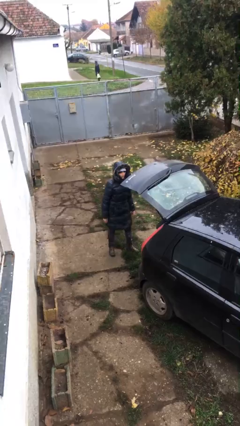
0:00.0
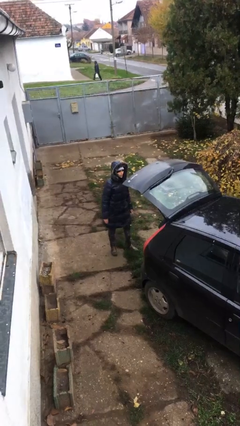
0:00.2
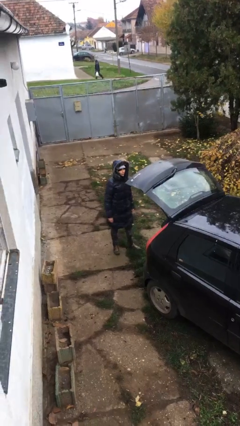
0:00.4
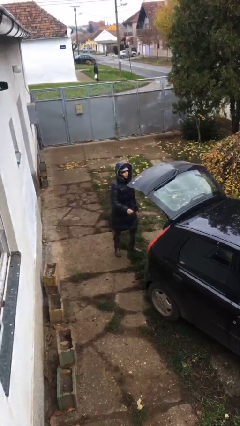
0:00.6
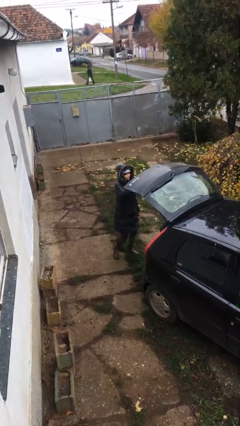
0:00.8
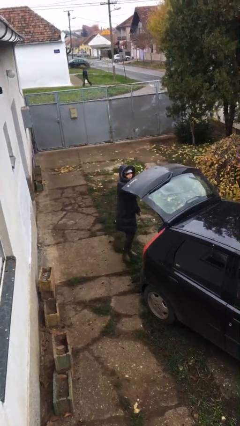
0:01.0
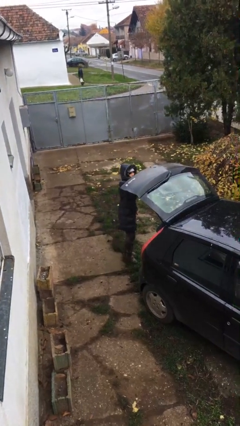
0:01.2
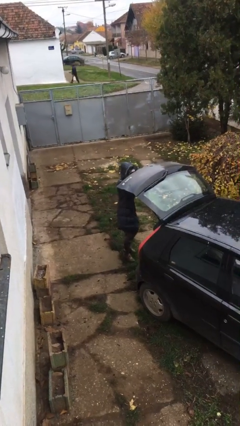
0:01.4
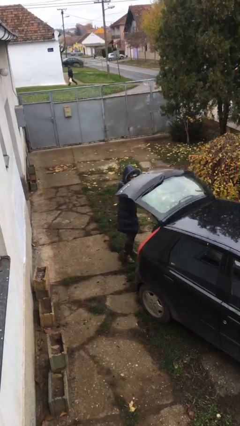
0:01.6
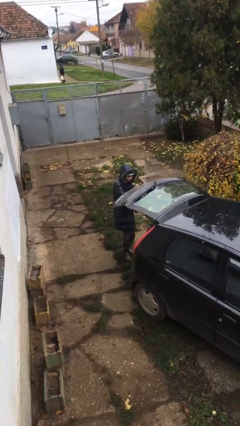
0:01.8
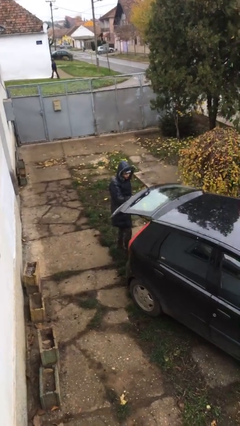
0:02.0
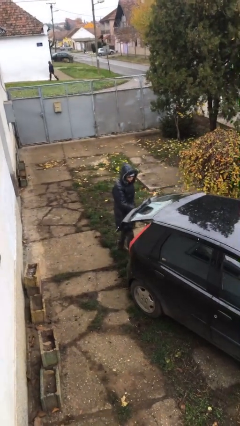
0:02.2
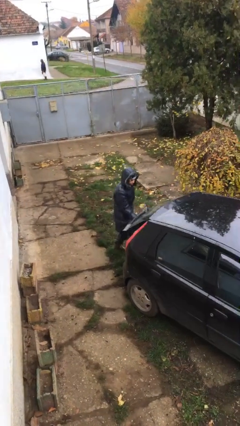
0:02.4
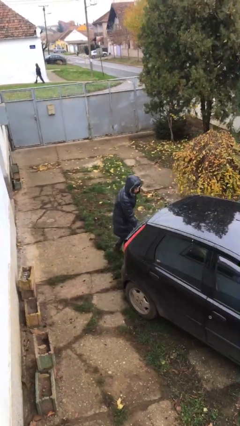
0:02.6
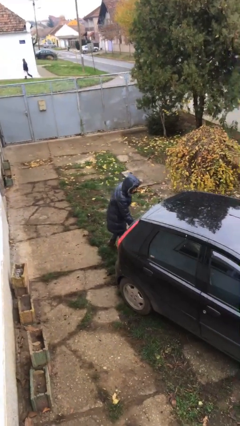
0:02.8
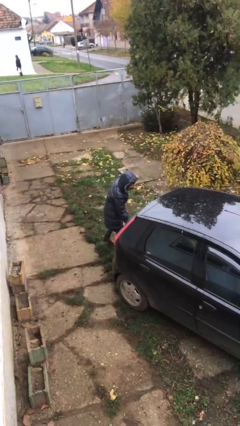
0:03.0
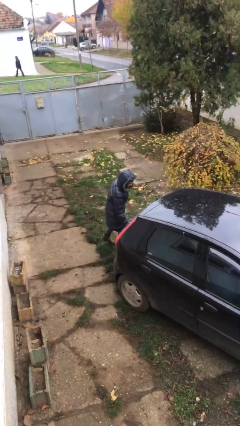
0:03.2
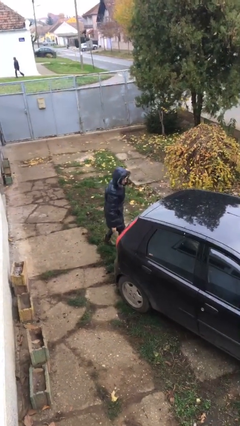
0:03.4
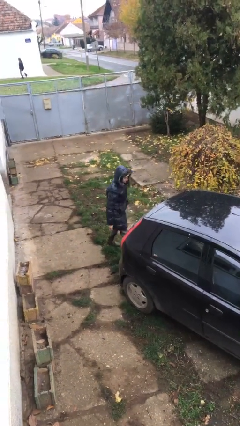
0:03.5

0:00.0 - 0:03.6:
person closes car trunk

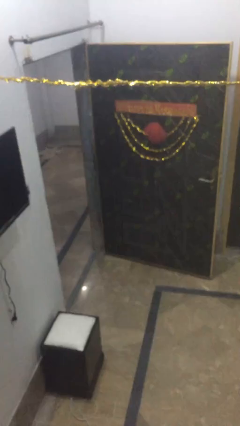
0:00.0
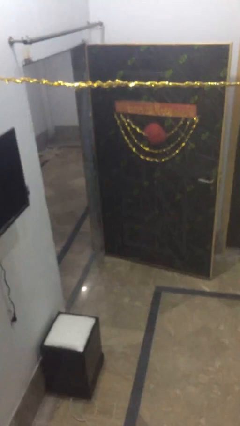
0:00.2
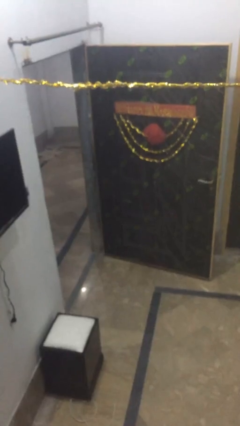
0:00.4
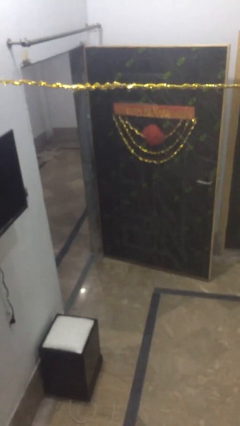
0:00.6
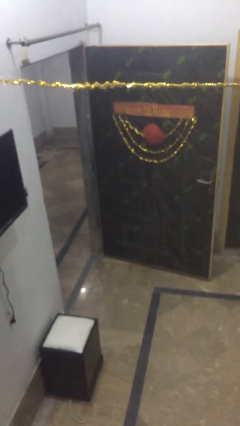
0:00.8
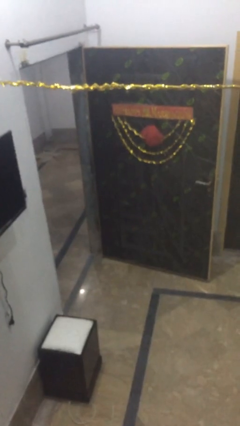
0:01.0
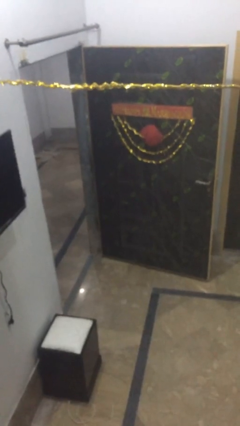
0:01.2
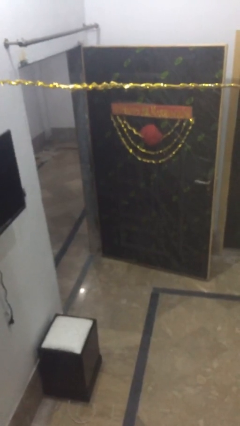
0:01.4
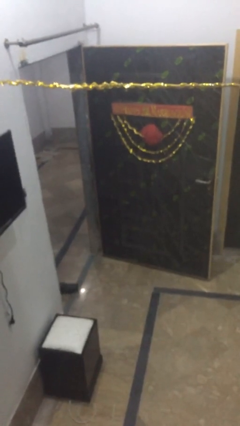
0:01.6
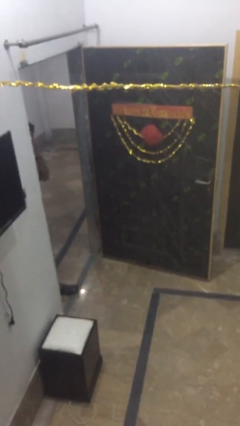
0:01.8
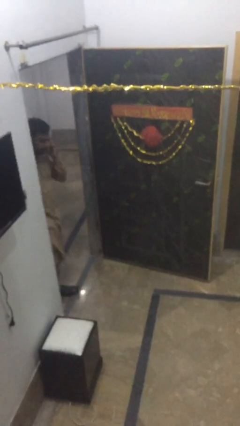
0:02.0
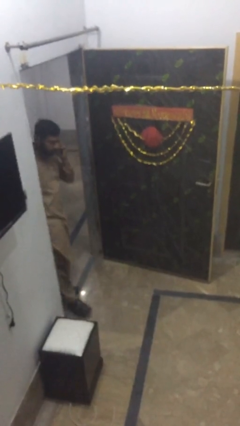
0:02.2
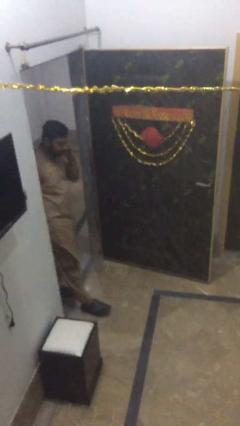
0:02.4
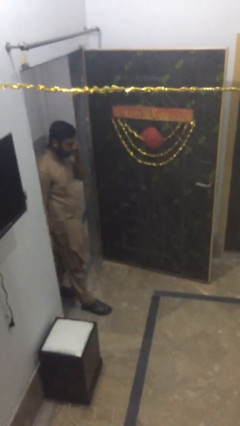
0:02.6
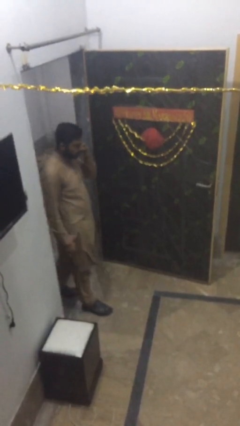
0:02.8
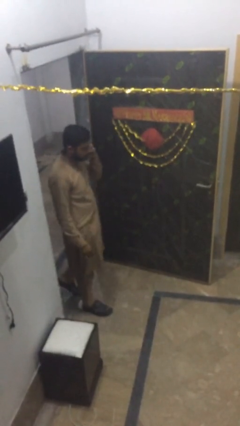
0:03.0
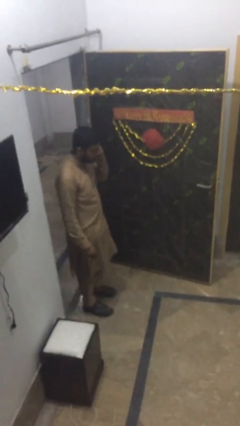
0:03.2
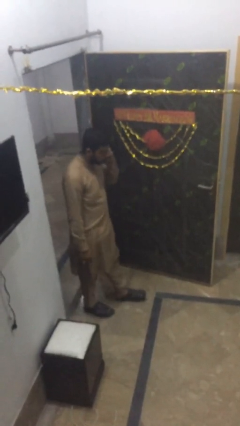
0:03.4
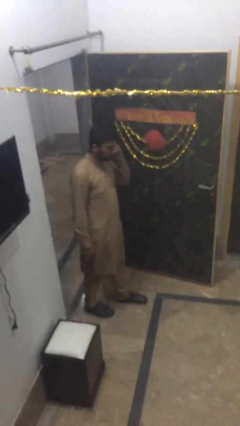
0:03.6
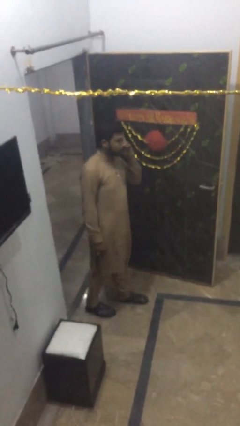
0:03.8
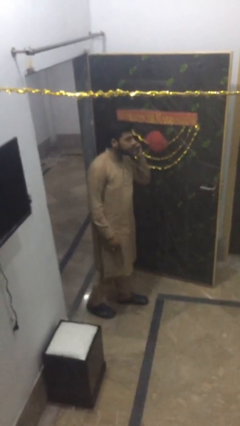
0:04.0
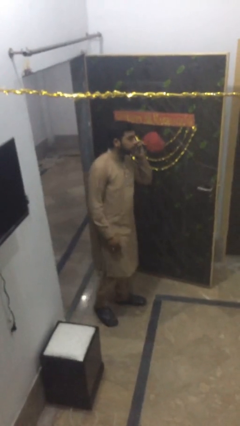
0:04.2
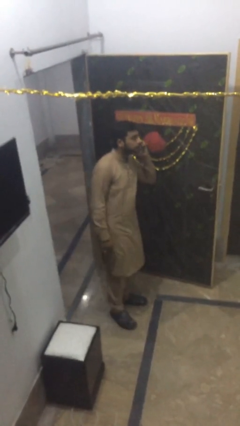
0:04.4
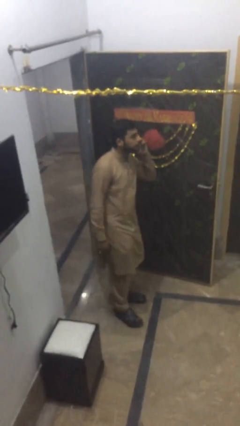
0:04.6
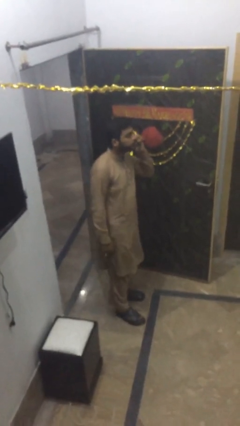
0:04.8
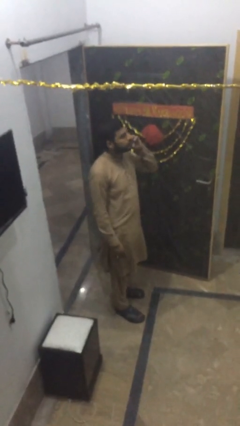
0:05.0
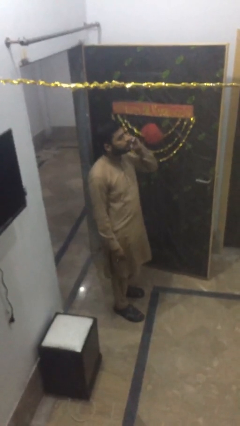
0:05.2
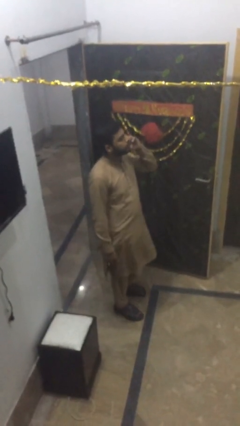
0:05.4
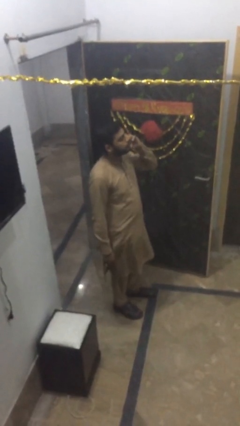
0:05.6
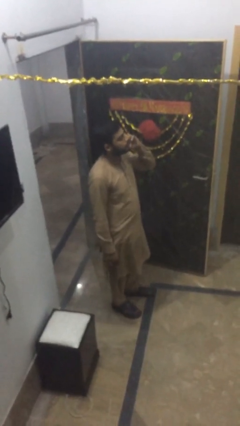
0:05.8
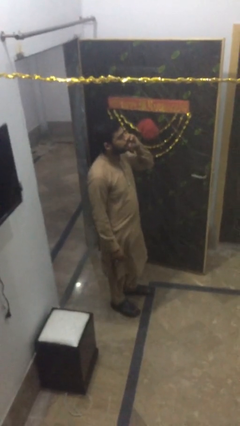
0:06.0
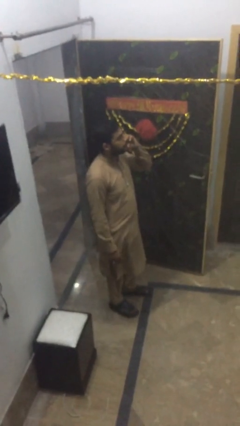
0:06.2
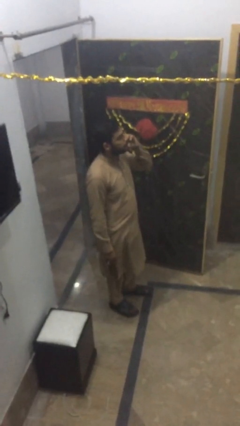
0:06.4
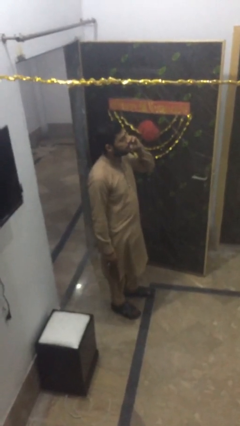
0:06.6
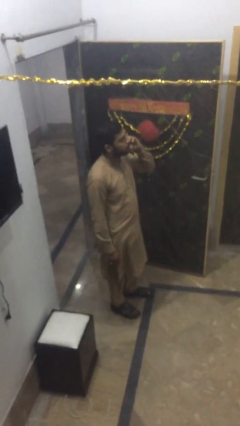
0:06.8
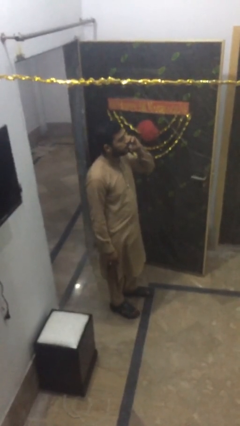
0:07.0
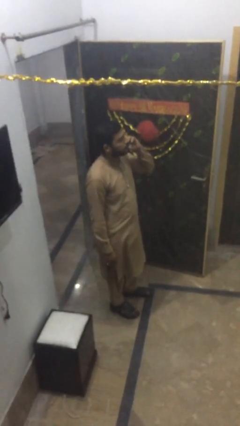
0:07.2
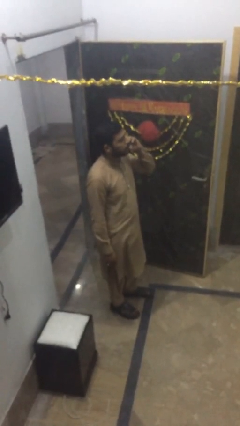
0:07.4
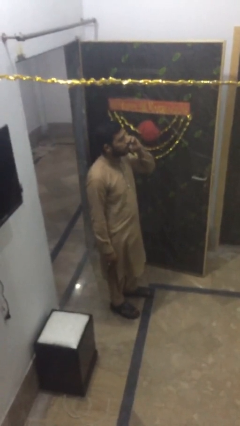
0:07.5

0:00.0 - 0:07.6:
person enters scene through structure

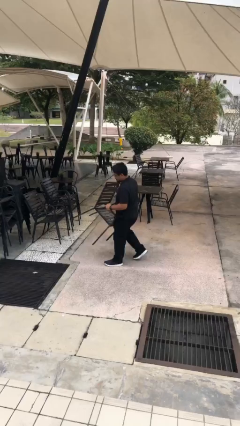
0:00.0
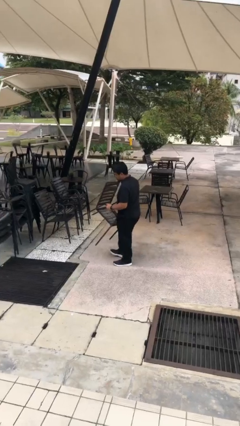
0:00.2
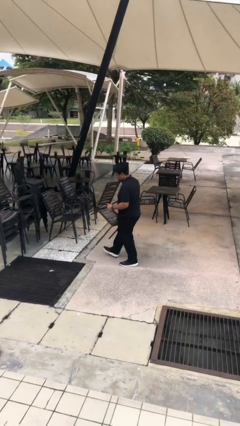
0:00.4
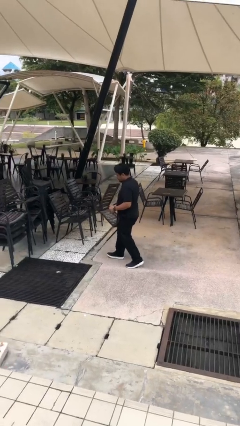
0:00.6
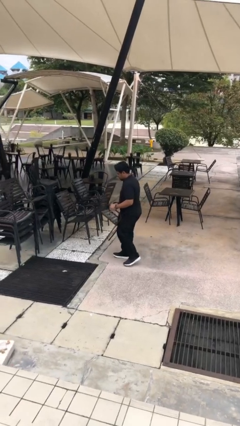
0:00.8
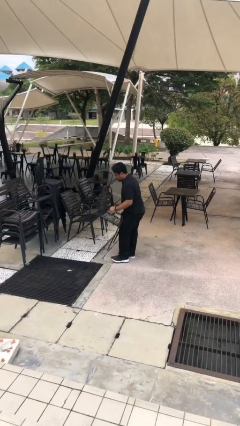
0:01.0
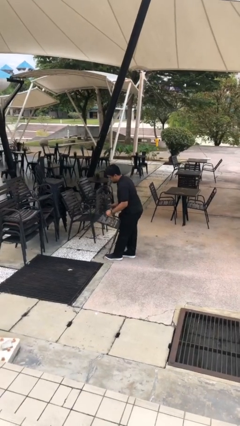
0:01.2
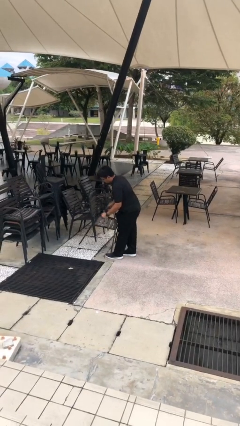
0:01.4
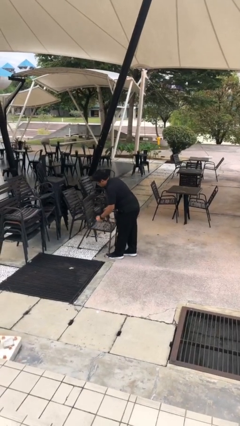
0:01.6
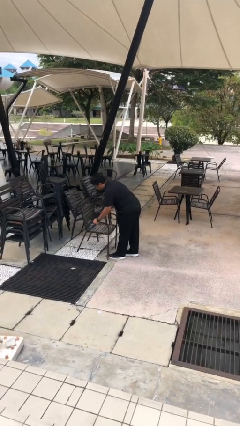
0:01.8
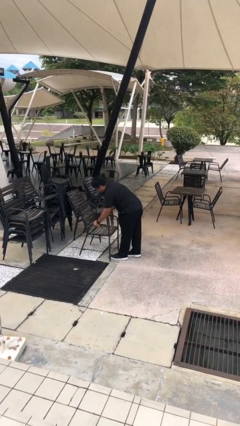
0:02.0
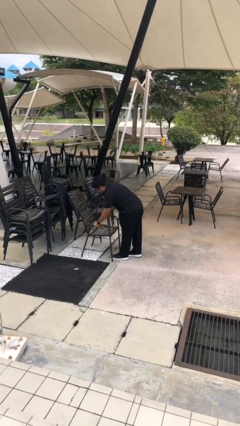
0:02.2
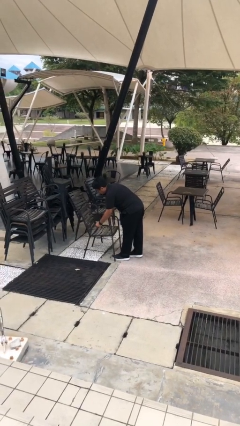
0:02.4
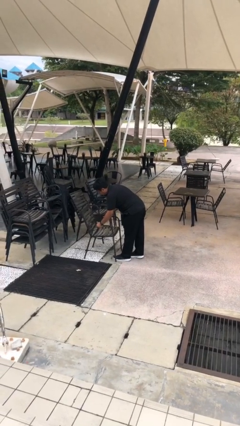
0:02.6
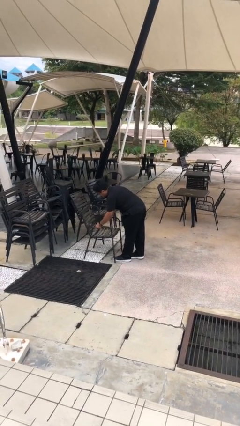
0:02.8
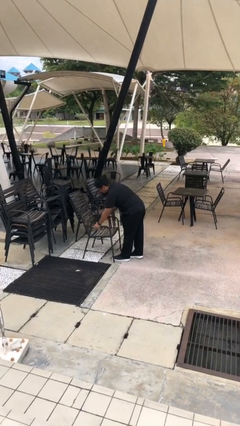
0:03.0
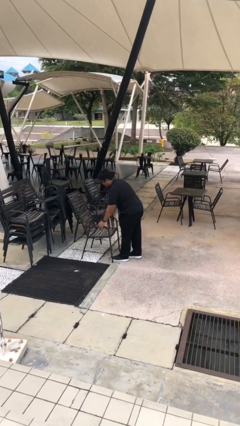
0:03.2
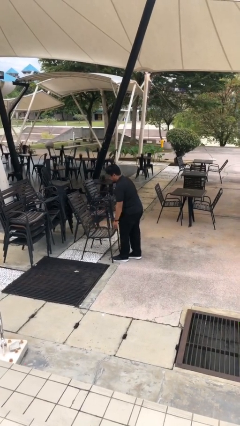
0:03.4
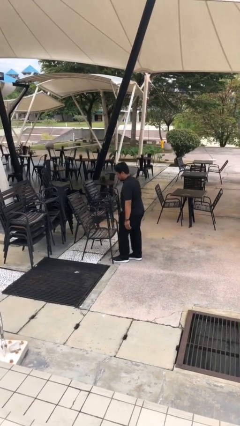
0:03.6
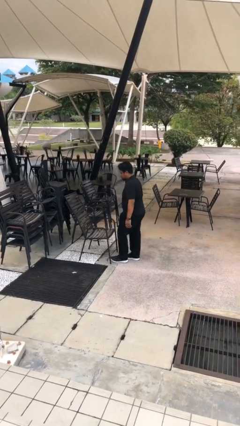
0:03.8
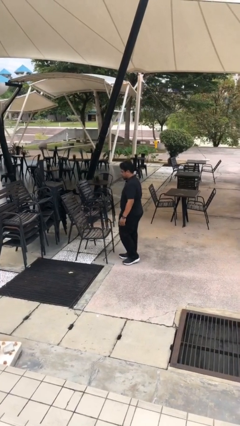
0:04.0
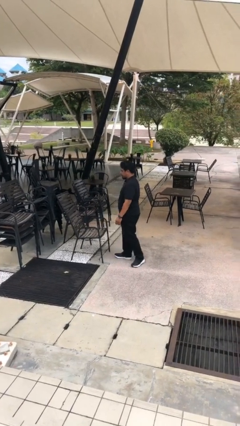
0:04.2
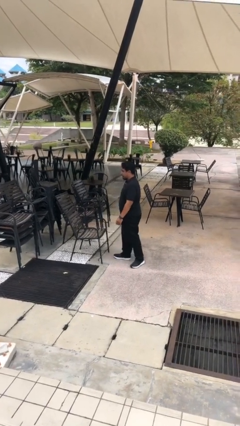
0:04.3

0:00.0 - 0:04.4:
person puts down object on floor

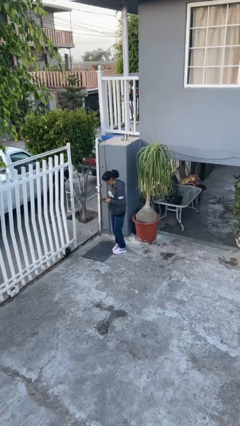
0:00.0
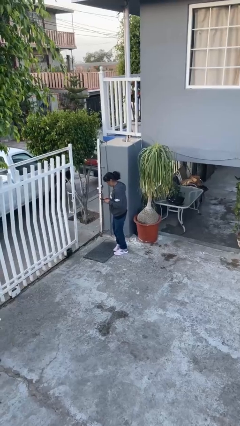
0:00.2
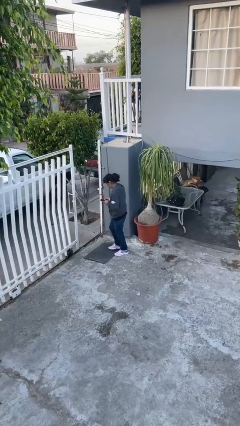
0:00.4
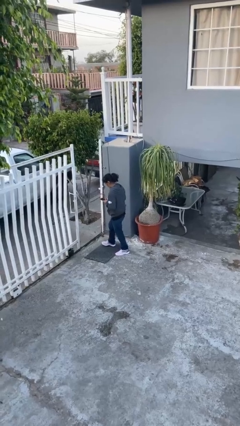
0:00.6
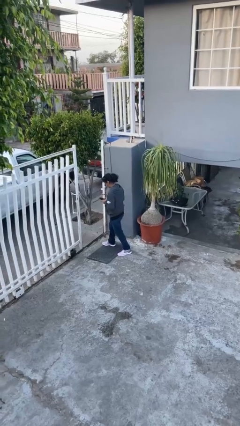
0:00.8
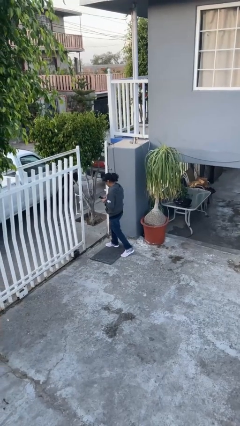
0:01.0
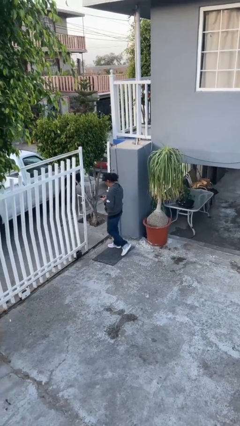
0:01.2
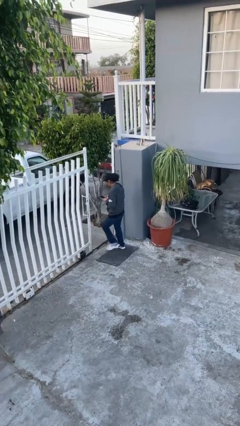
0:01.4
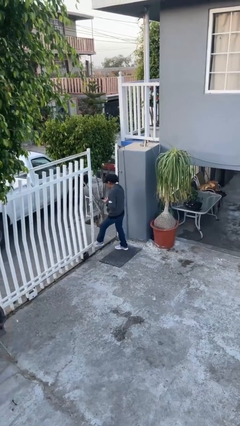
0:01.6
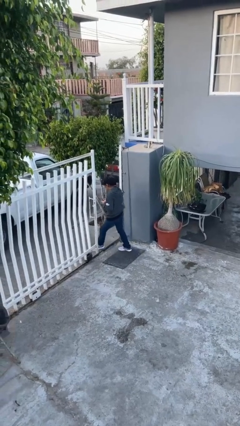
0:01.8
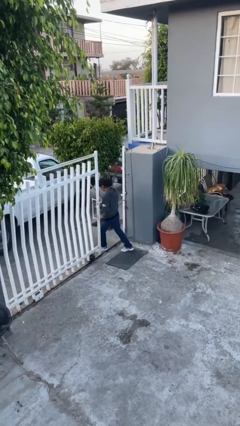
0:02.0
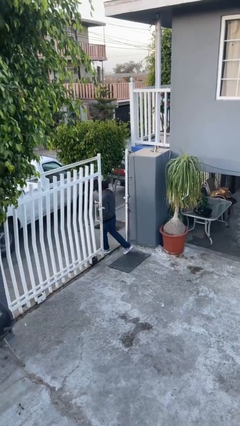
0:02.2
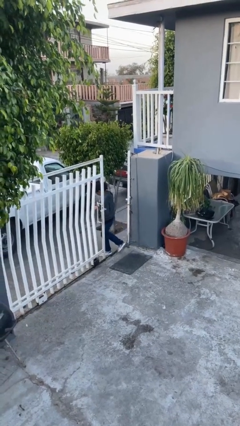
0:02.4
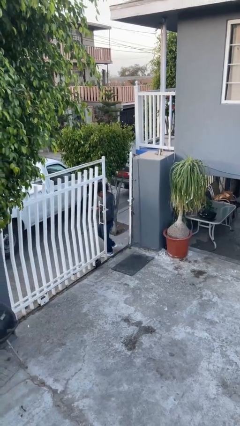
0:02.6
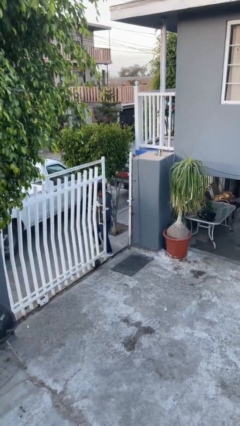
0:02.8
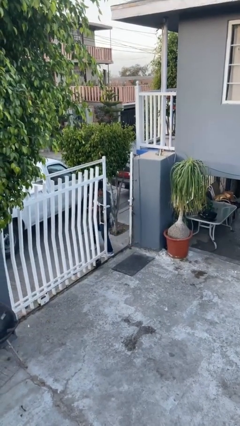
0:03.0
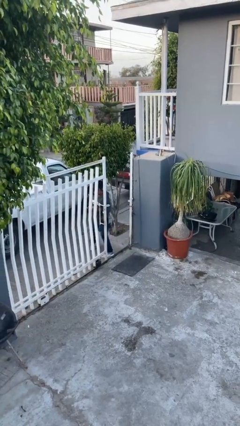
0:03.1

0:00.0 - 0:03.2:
person exits scene through structure
